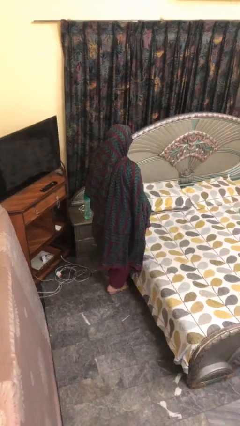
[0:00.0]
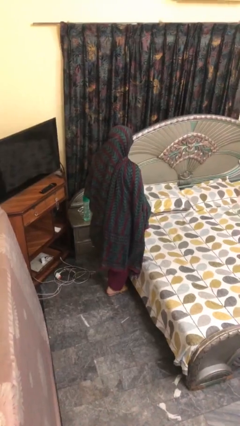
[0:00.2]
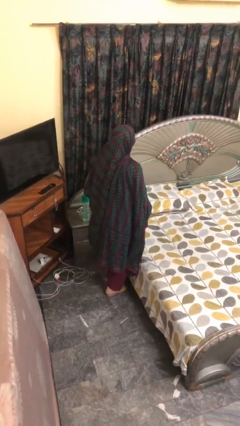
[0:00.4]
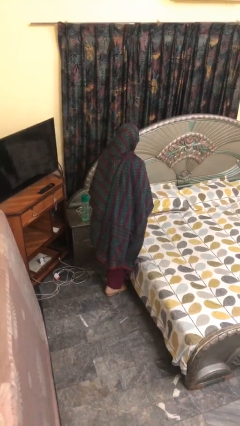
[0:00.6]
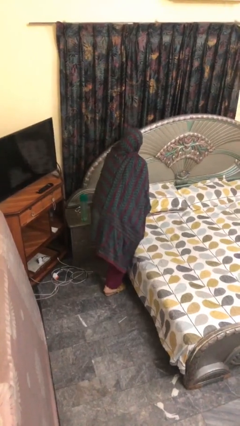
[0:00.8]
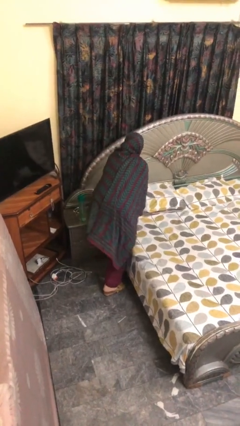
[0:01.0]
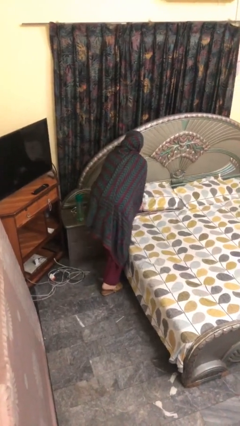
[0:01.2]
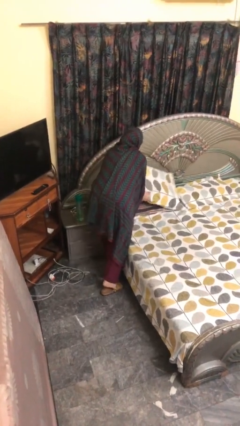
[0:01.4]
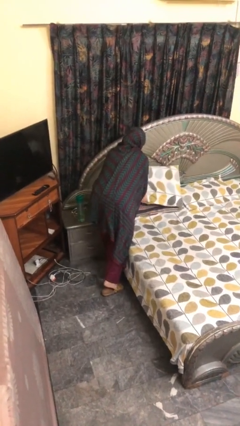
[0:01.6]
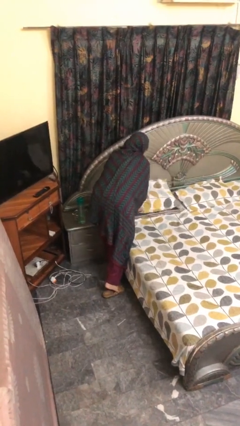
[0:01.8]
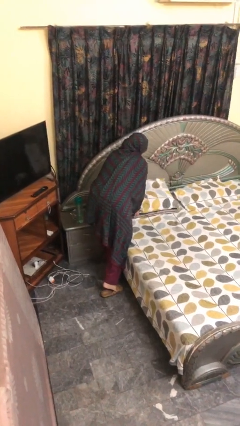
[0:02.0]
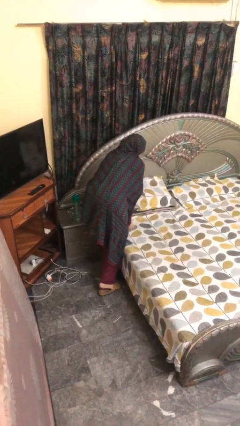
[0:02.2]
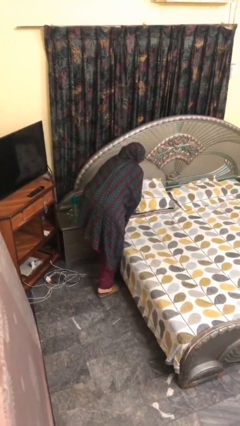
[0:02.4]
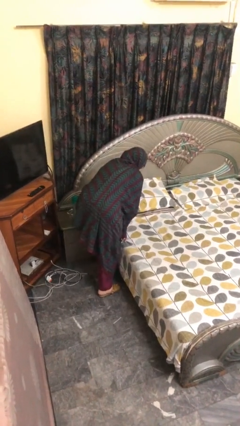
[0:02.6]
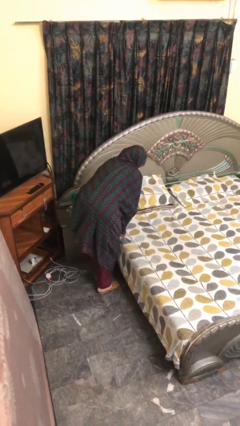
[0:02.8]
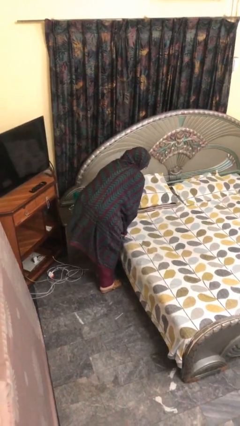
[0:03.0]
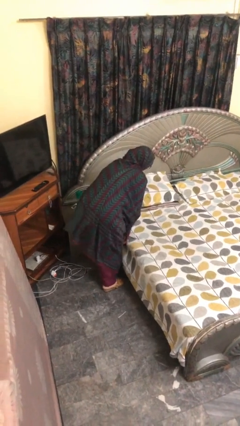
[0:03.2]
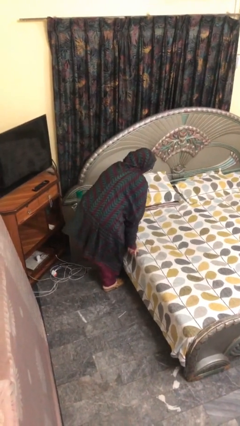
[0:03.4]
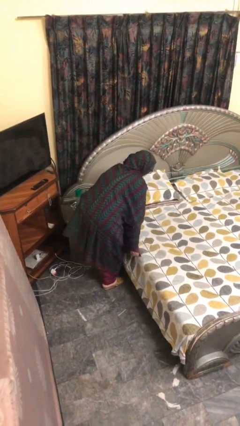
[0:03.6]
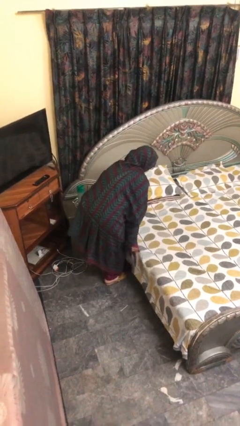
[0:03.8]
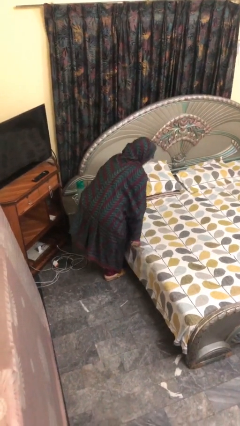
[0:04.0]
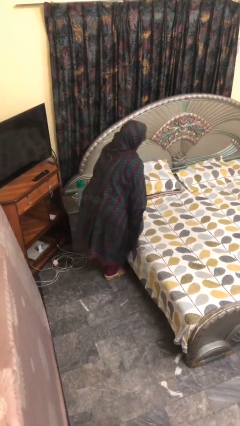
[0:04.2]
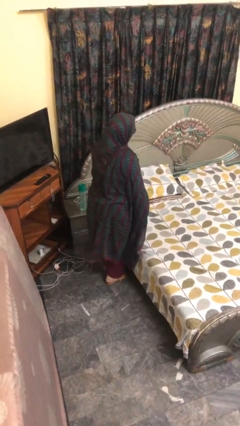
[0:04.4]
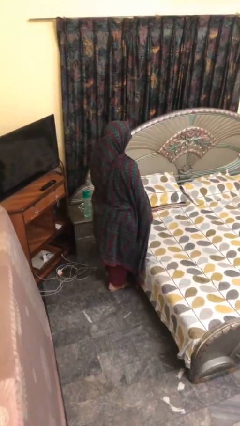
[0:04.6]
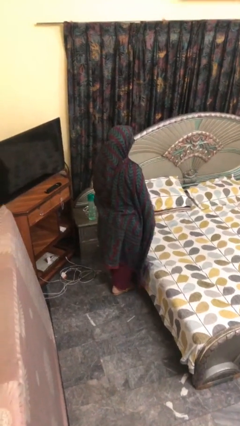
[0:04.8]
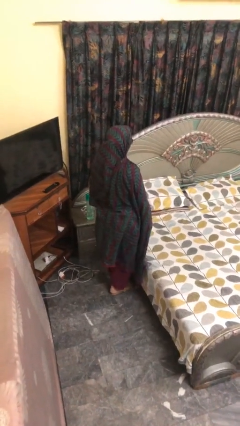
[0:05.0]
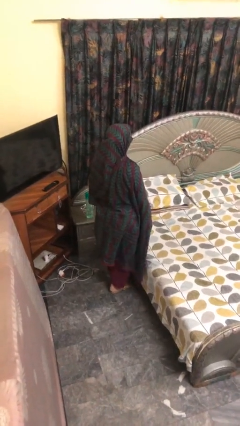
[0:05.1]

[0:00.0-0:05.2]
person makes bed

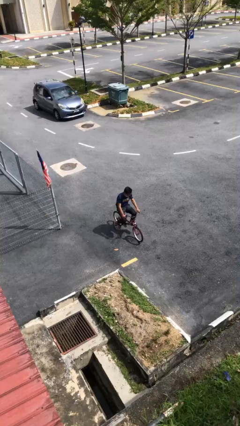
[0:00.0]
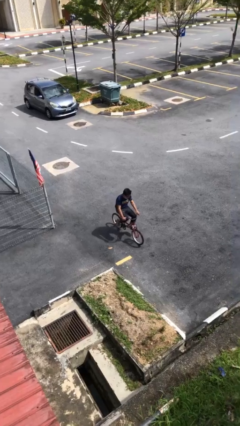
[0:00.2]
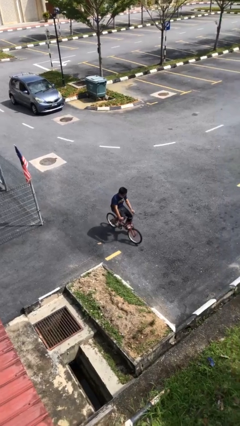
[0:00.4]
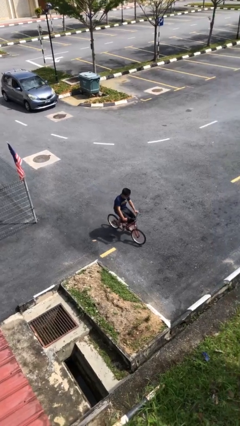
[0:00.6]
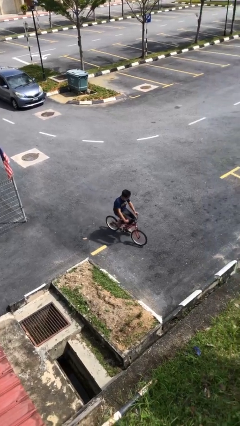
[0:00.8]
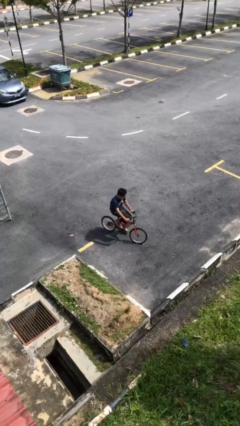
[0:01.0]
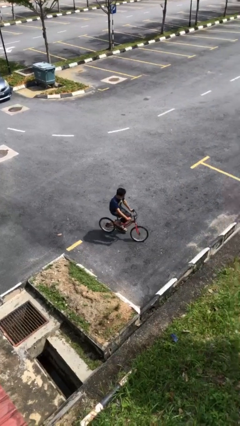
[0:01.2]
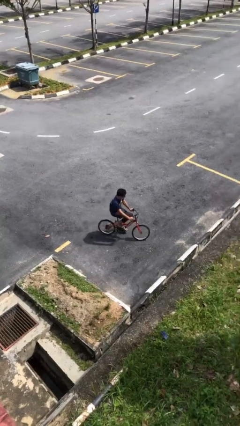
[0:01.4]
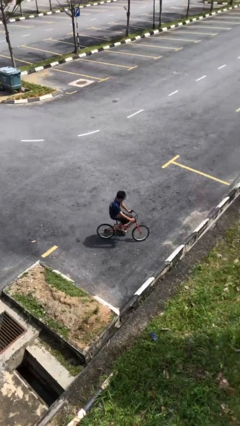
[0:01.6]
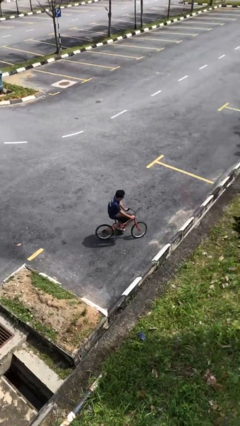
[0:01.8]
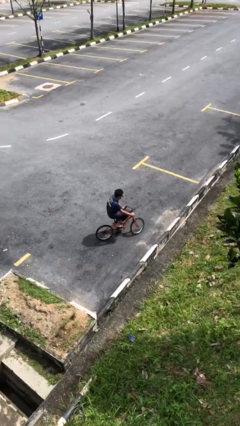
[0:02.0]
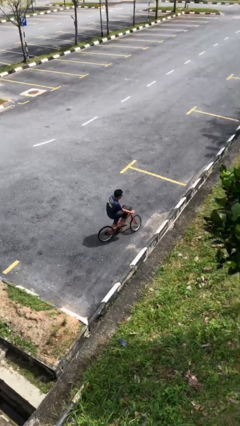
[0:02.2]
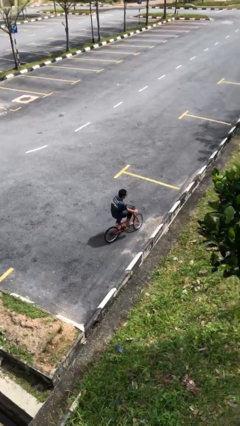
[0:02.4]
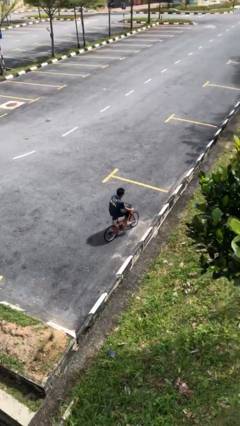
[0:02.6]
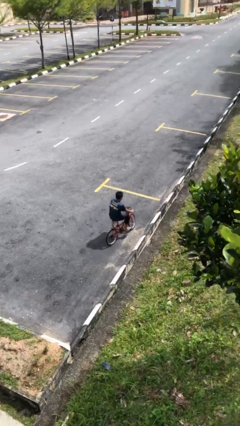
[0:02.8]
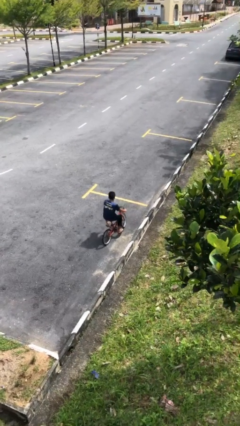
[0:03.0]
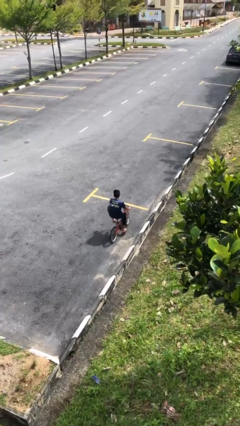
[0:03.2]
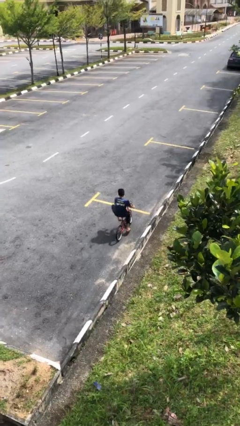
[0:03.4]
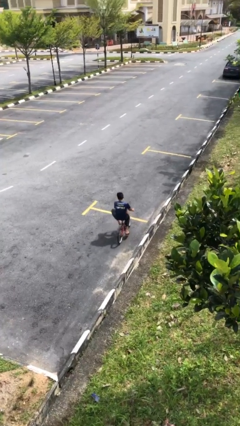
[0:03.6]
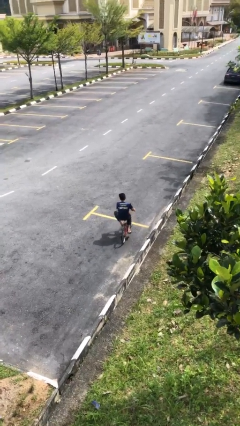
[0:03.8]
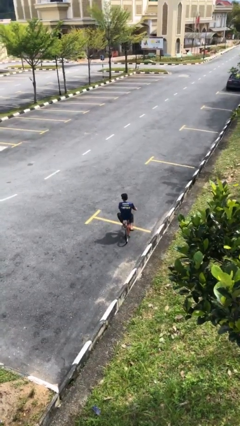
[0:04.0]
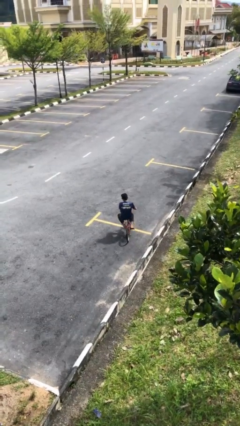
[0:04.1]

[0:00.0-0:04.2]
person rides bicycle

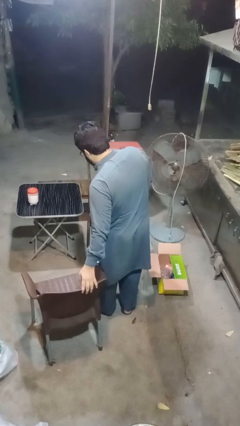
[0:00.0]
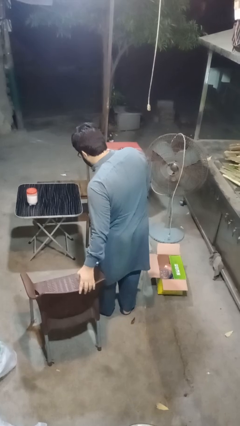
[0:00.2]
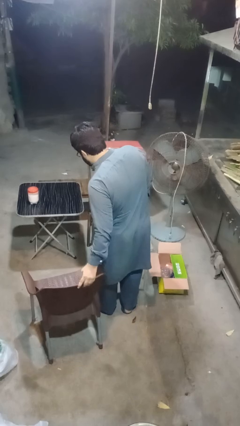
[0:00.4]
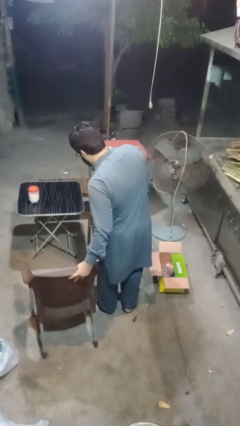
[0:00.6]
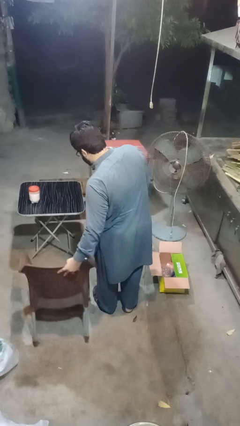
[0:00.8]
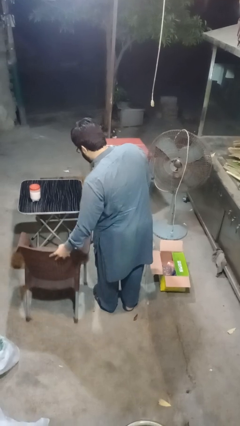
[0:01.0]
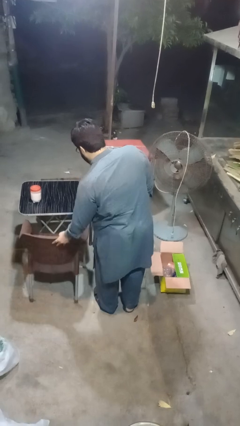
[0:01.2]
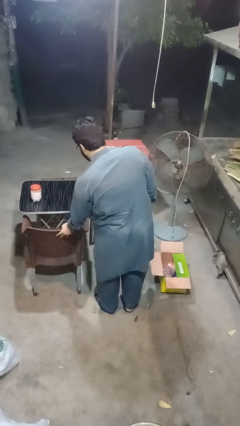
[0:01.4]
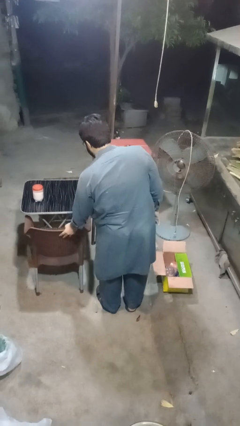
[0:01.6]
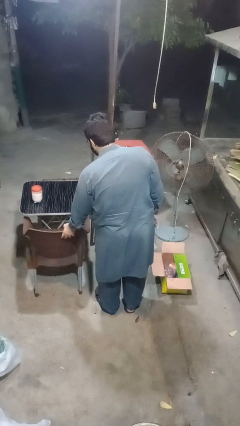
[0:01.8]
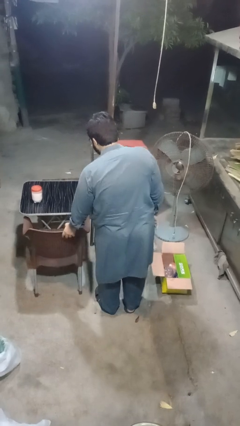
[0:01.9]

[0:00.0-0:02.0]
person pushes in chair

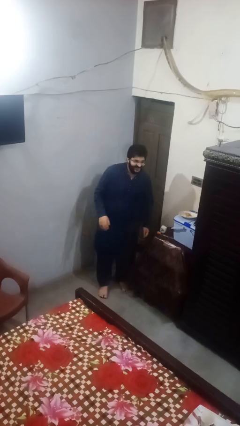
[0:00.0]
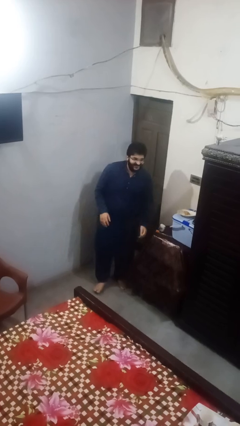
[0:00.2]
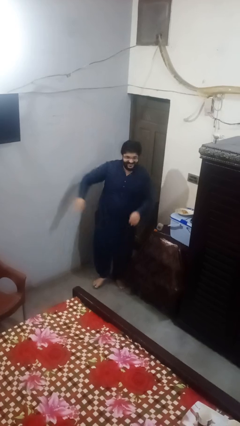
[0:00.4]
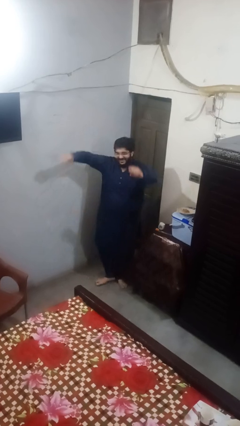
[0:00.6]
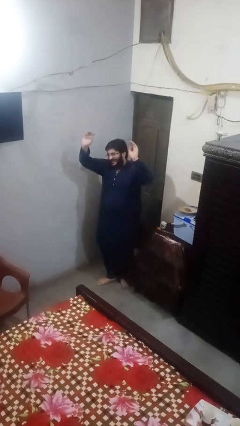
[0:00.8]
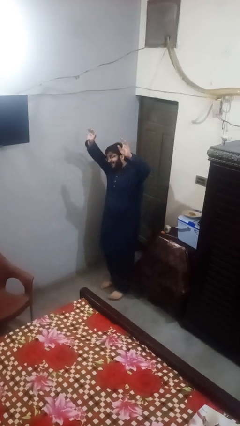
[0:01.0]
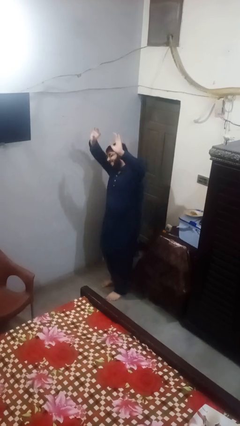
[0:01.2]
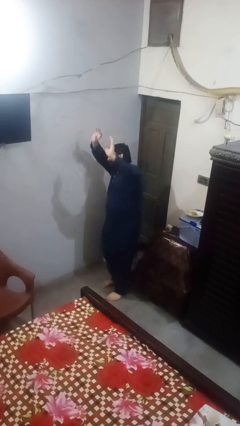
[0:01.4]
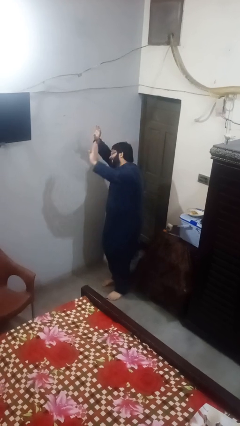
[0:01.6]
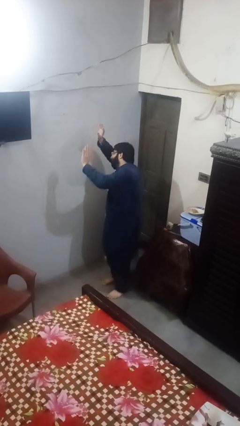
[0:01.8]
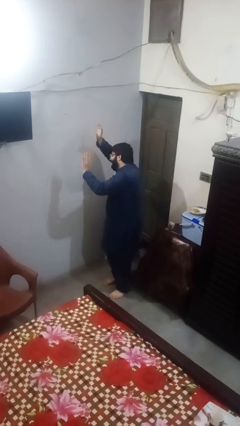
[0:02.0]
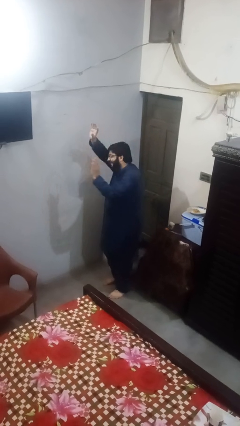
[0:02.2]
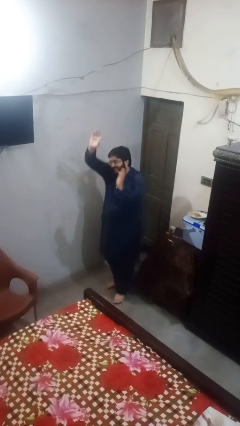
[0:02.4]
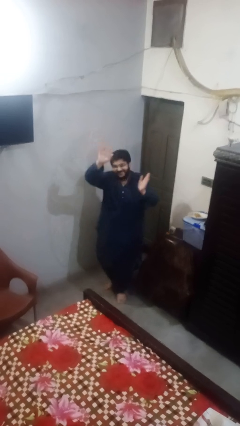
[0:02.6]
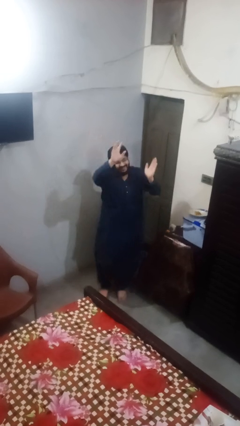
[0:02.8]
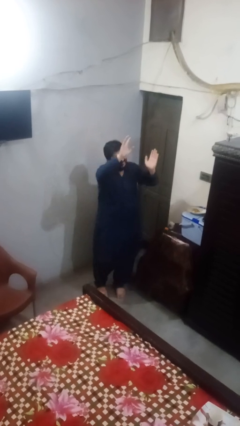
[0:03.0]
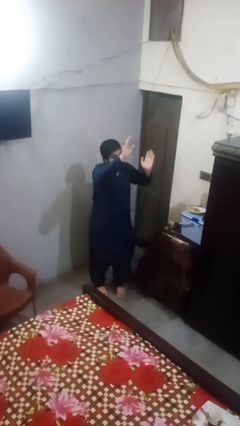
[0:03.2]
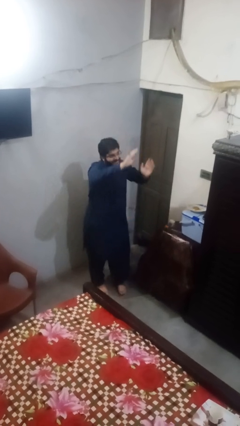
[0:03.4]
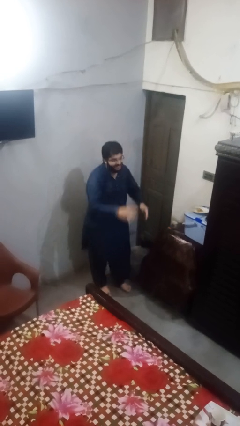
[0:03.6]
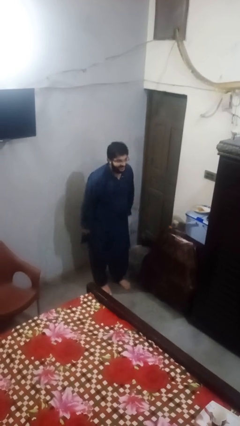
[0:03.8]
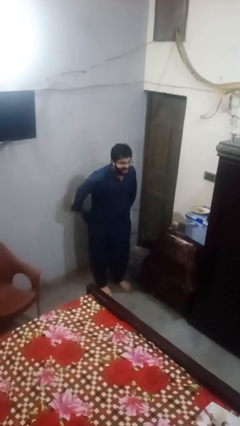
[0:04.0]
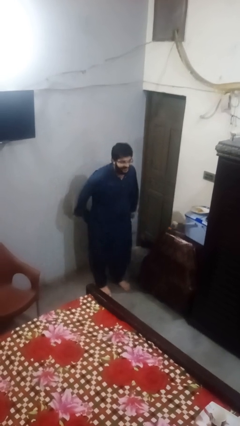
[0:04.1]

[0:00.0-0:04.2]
person dances in place

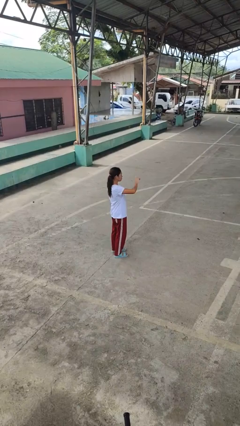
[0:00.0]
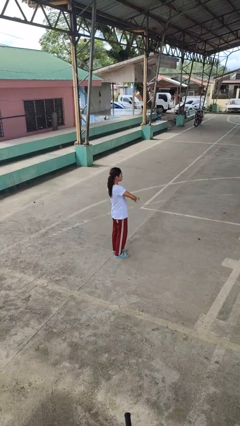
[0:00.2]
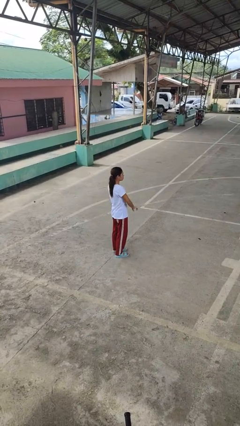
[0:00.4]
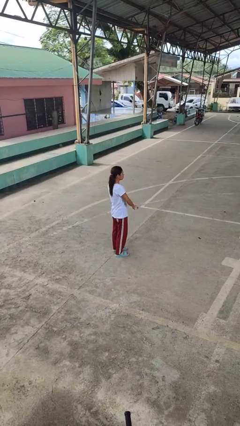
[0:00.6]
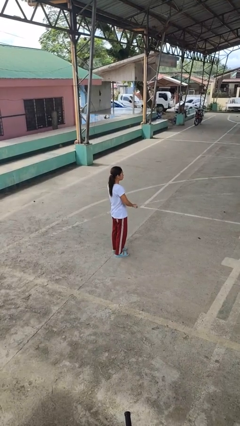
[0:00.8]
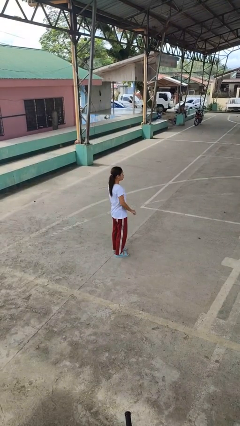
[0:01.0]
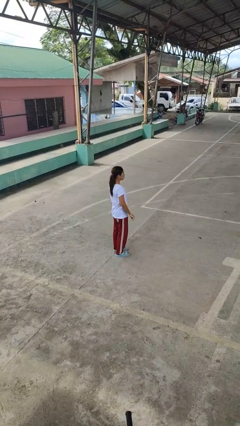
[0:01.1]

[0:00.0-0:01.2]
person gestures swipe down

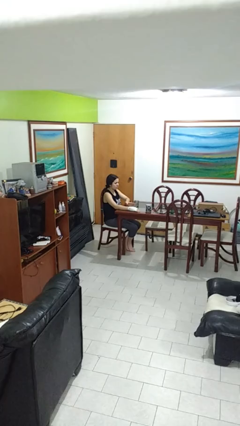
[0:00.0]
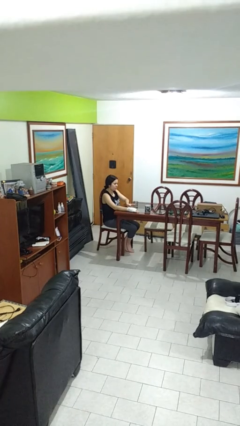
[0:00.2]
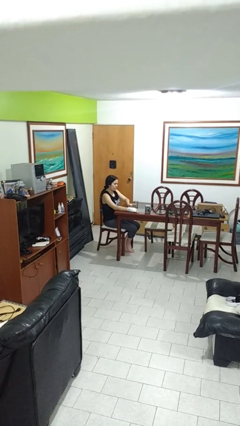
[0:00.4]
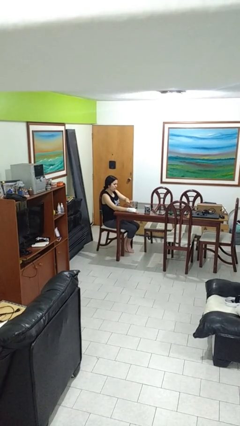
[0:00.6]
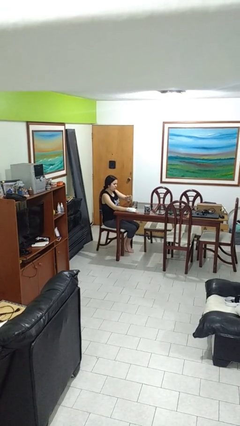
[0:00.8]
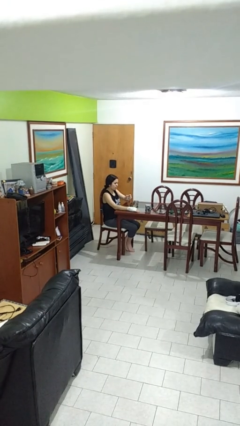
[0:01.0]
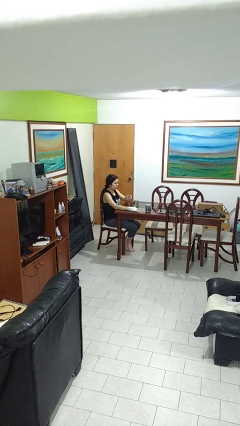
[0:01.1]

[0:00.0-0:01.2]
person picks up object from table
